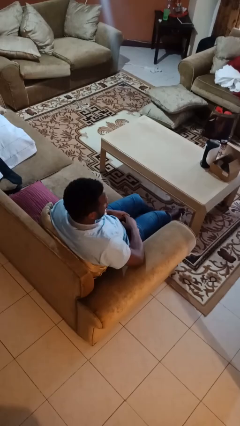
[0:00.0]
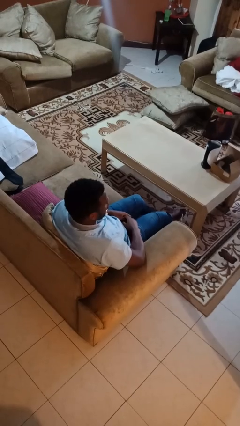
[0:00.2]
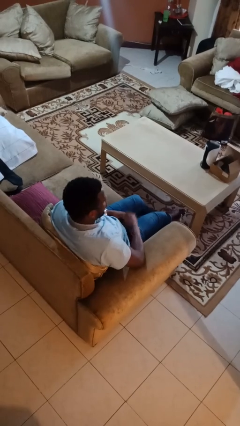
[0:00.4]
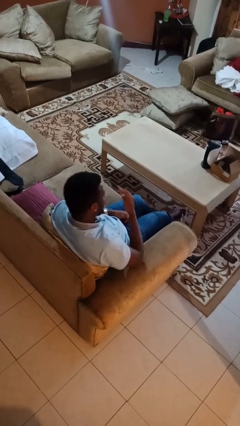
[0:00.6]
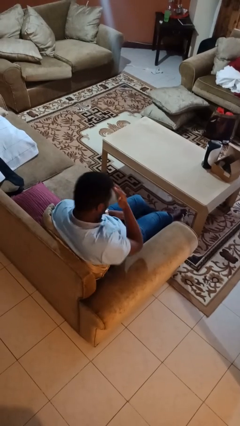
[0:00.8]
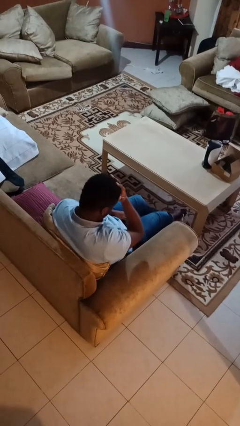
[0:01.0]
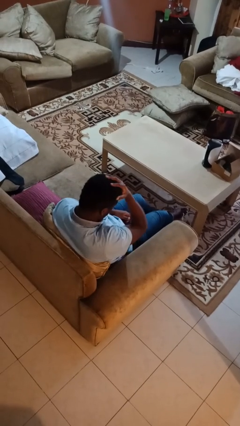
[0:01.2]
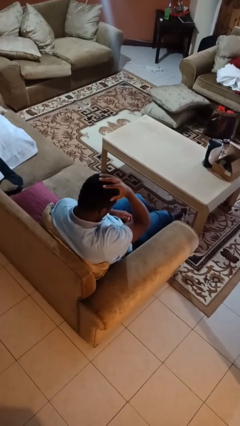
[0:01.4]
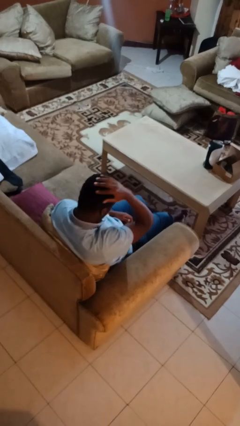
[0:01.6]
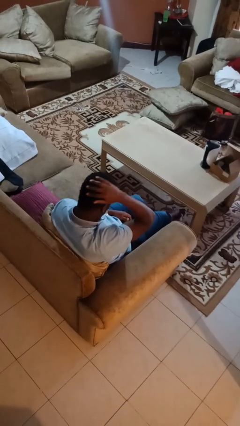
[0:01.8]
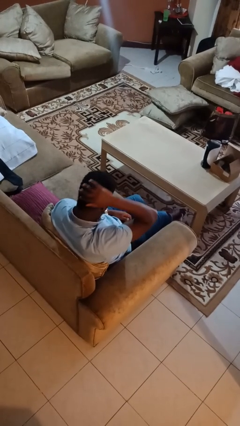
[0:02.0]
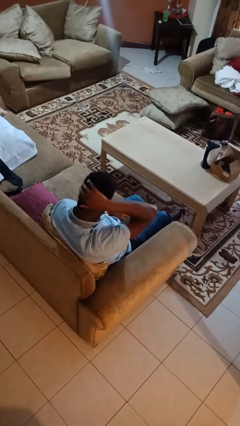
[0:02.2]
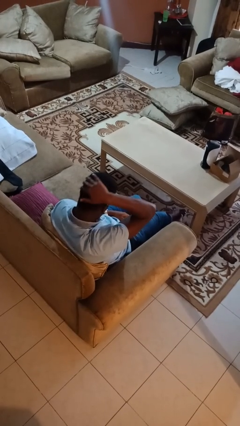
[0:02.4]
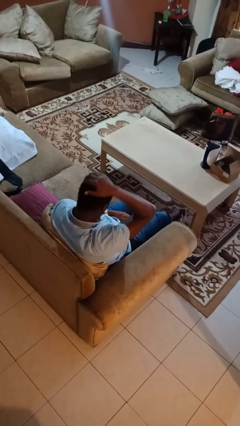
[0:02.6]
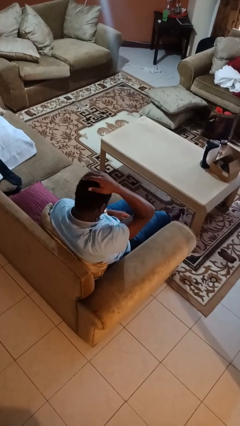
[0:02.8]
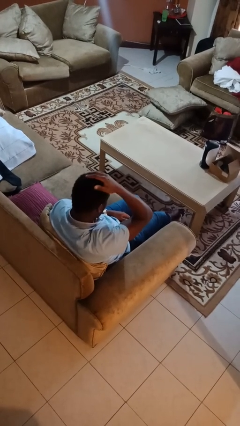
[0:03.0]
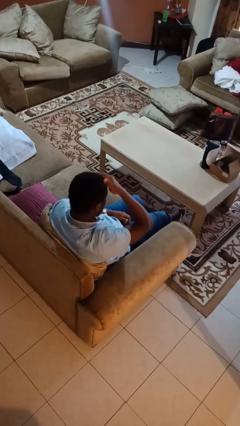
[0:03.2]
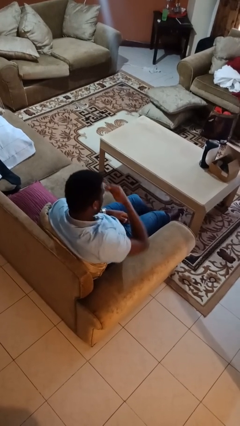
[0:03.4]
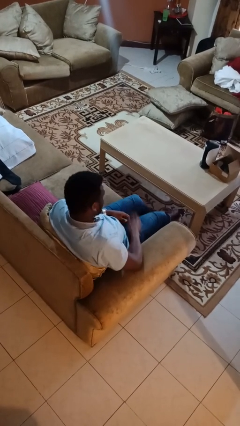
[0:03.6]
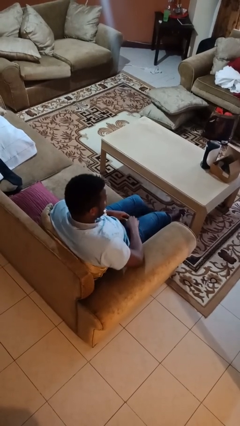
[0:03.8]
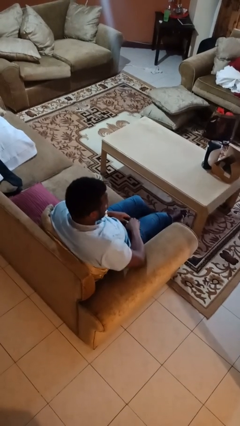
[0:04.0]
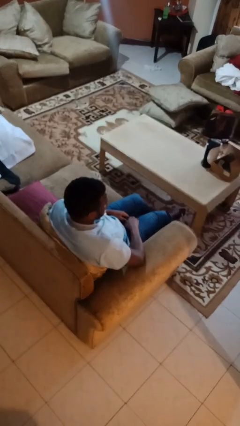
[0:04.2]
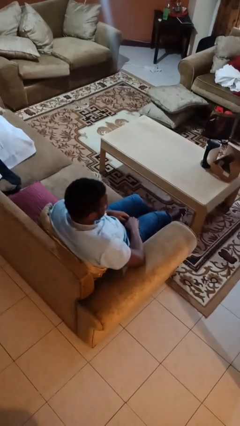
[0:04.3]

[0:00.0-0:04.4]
person strokes hair

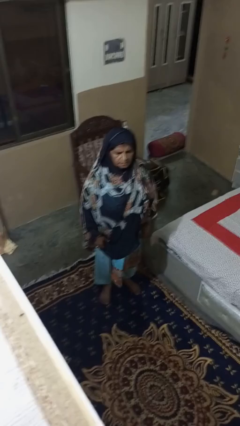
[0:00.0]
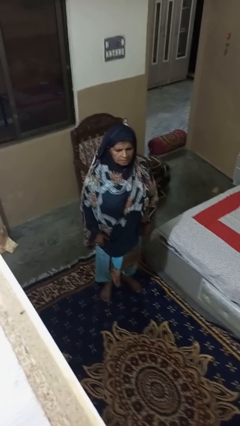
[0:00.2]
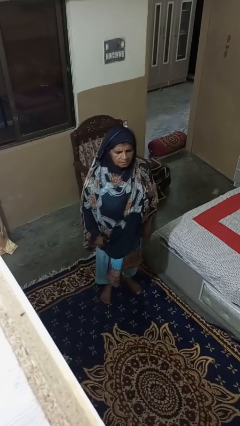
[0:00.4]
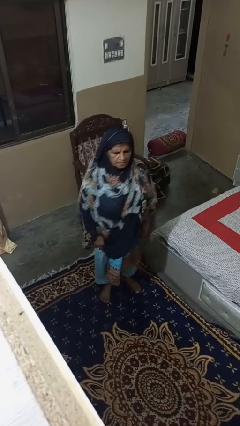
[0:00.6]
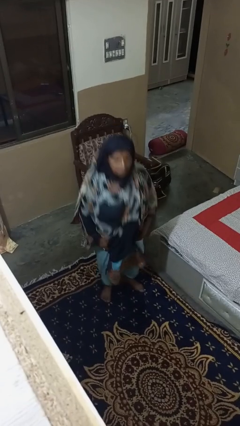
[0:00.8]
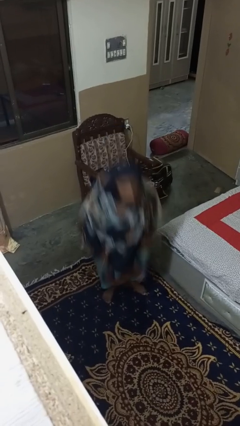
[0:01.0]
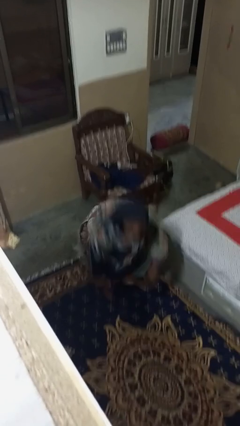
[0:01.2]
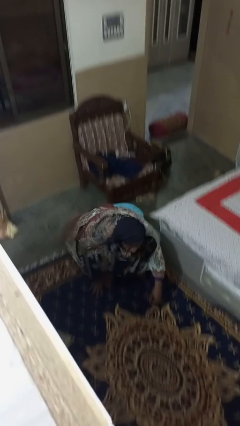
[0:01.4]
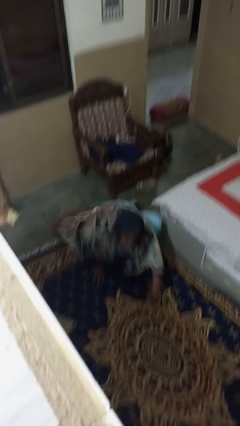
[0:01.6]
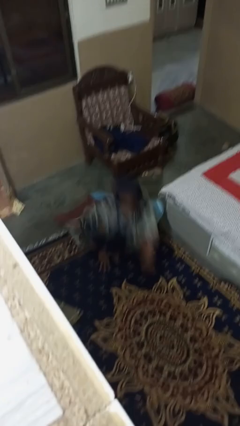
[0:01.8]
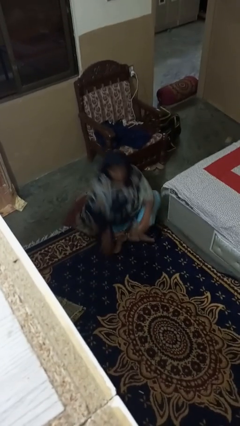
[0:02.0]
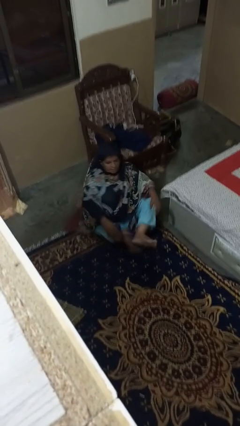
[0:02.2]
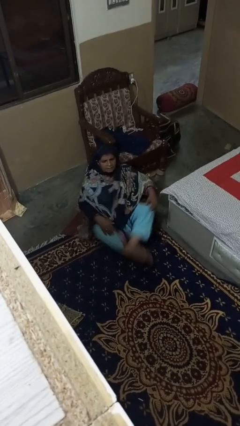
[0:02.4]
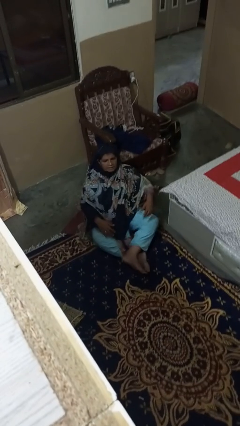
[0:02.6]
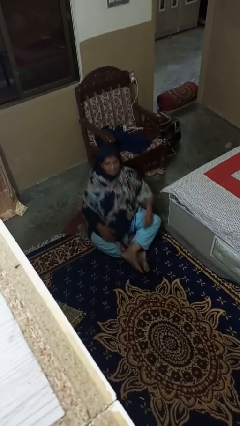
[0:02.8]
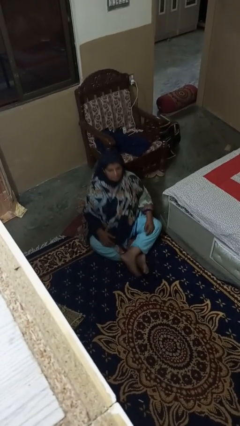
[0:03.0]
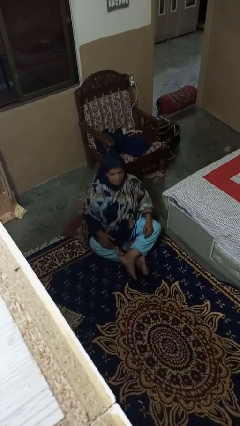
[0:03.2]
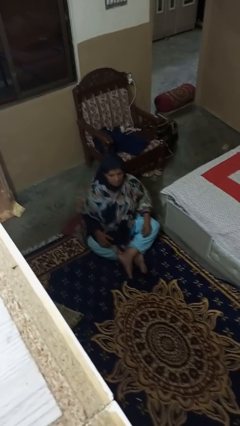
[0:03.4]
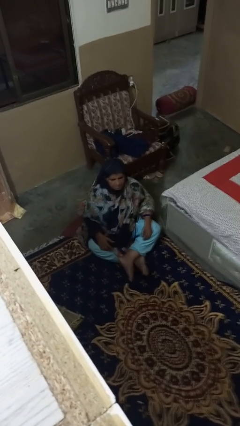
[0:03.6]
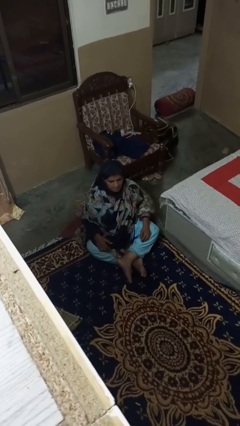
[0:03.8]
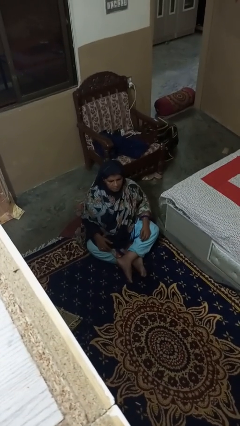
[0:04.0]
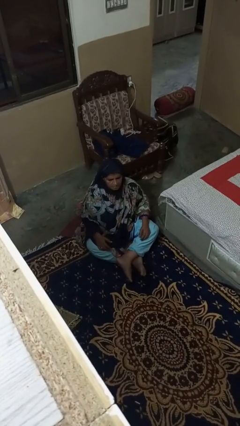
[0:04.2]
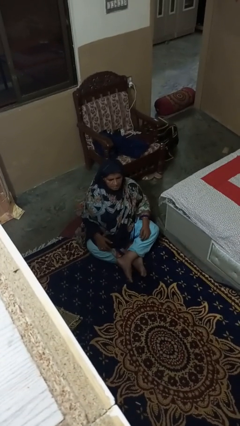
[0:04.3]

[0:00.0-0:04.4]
person sits crisscross

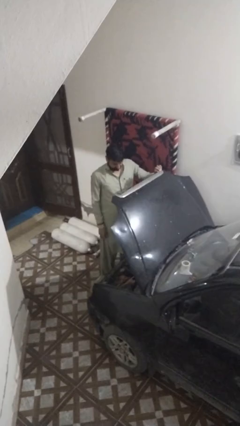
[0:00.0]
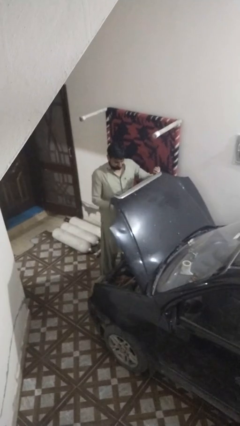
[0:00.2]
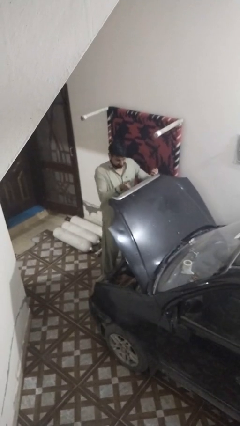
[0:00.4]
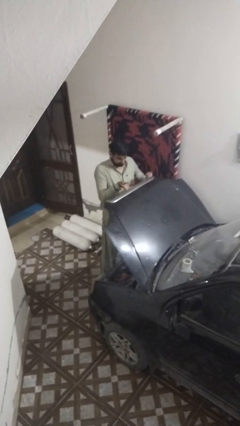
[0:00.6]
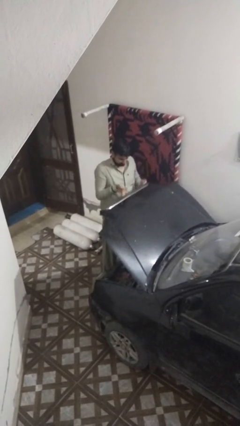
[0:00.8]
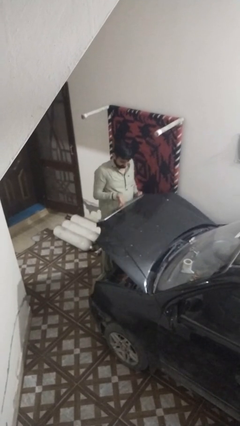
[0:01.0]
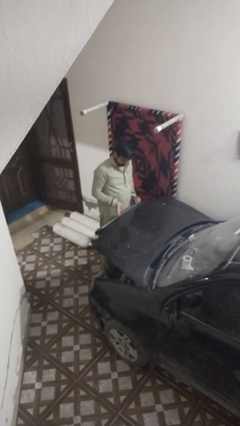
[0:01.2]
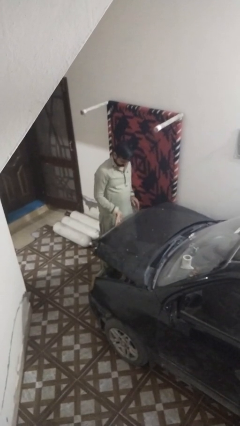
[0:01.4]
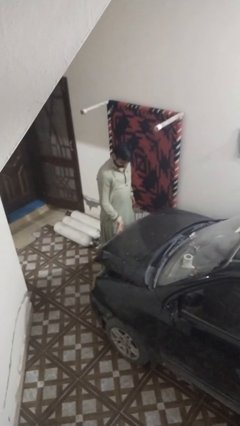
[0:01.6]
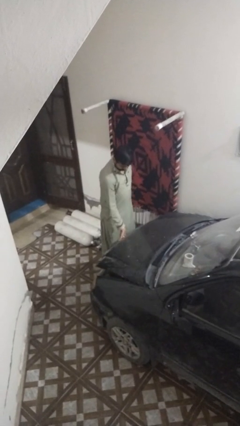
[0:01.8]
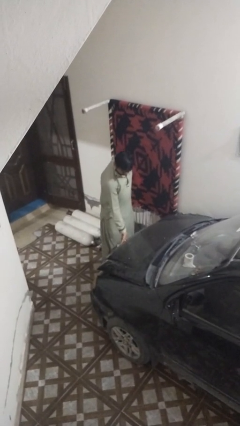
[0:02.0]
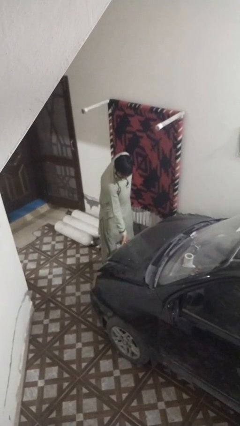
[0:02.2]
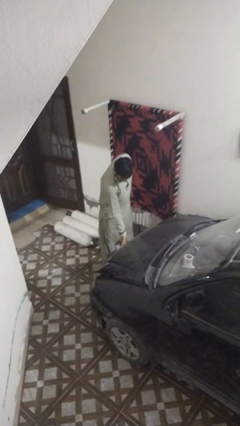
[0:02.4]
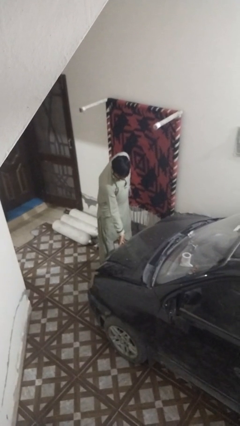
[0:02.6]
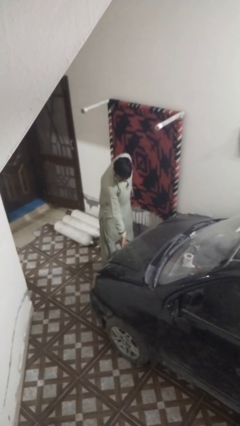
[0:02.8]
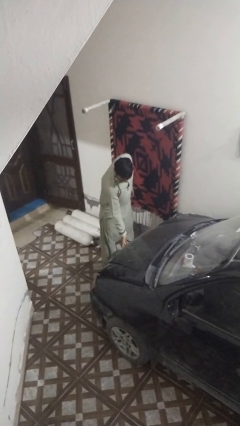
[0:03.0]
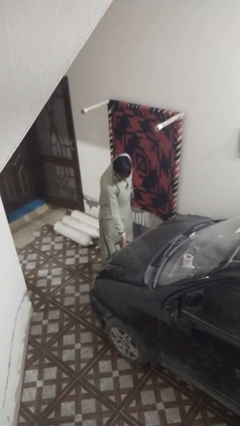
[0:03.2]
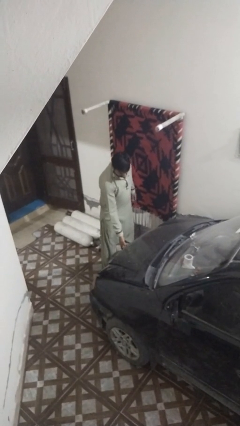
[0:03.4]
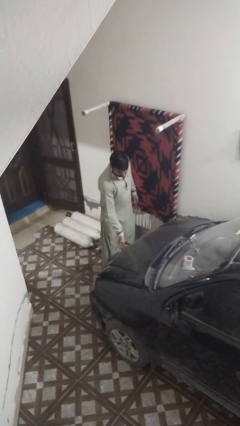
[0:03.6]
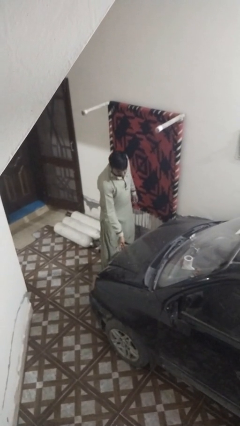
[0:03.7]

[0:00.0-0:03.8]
person closes car hood

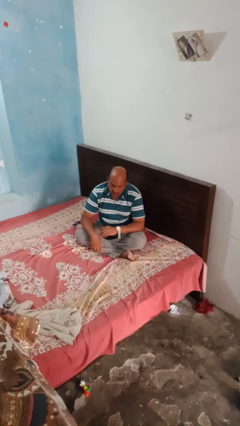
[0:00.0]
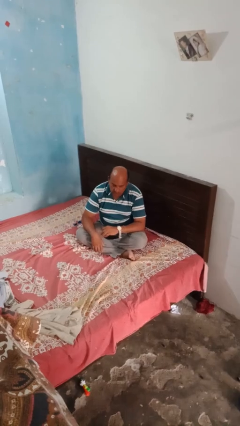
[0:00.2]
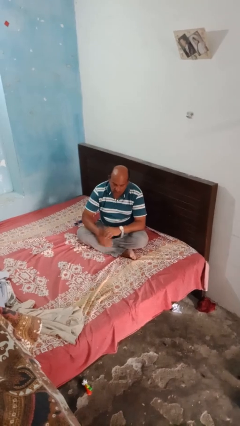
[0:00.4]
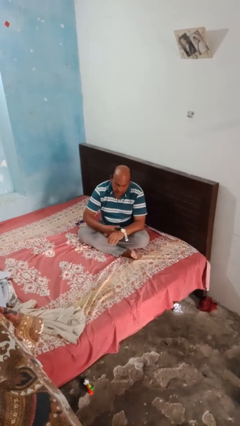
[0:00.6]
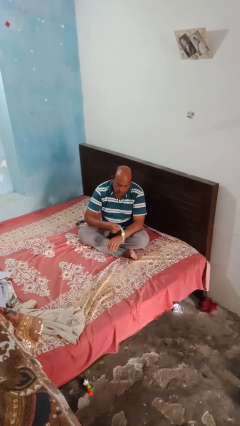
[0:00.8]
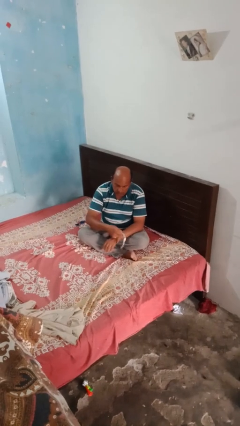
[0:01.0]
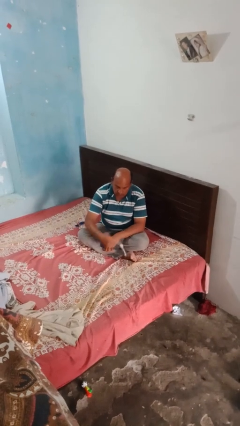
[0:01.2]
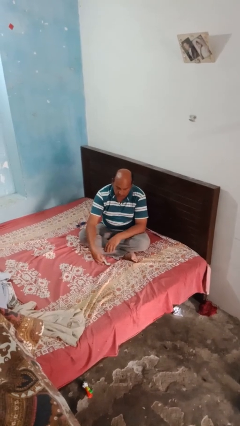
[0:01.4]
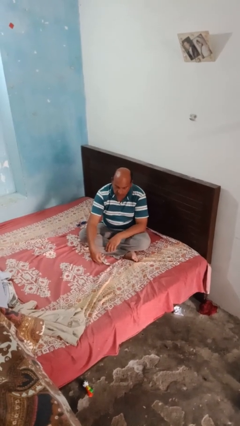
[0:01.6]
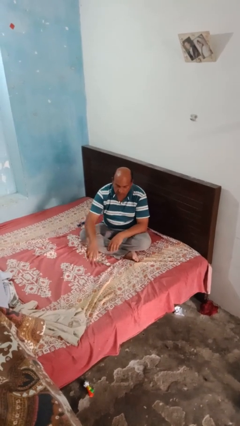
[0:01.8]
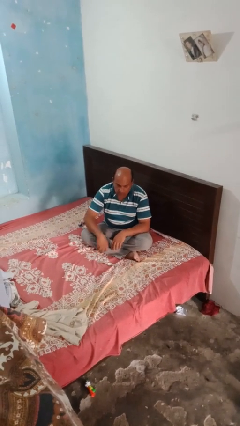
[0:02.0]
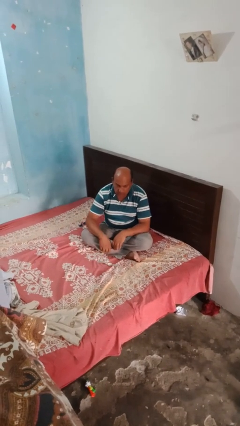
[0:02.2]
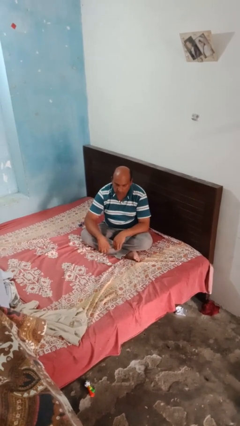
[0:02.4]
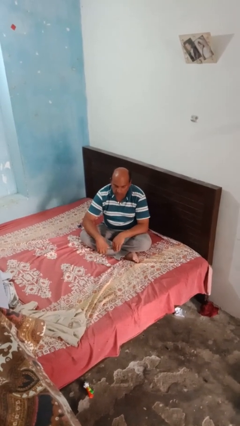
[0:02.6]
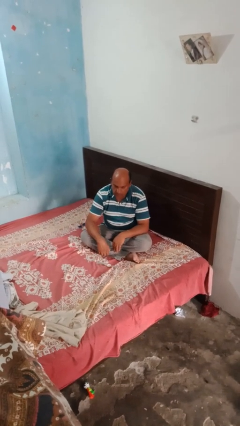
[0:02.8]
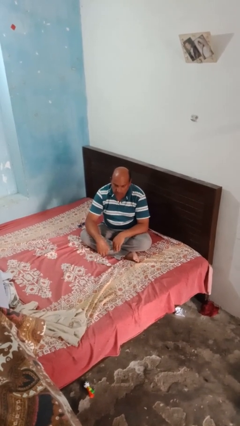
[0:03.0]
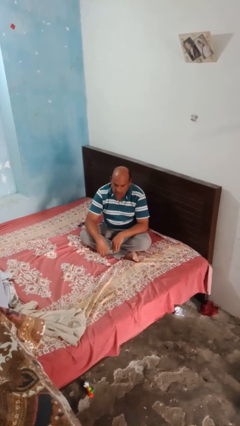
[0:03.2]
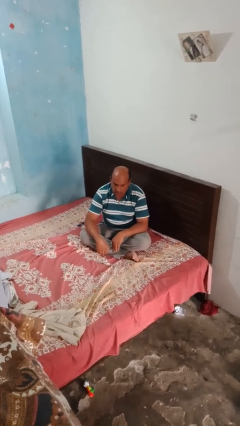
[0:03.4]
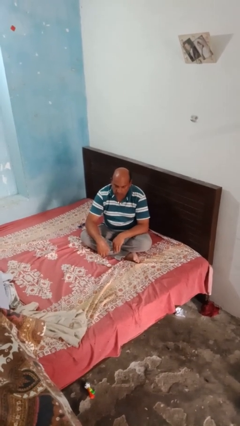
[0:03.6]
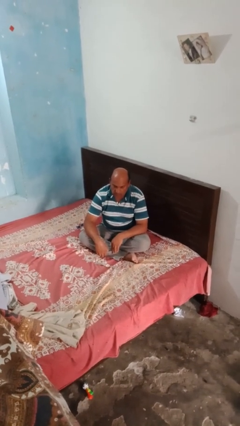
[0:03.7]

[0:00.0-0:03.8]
person takes off wristwatch

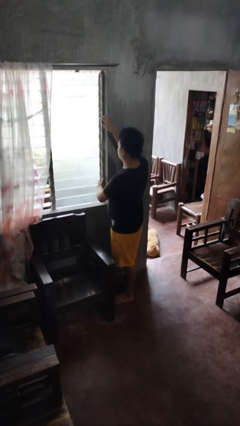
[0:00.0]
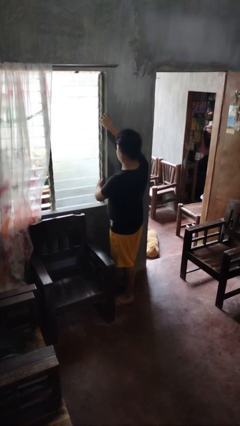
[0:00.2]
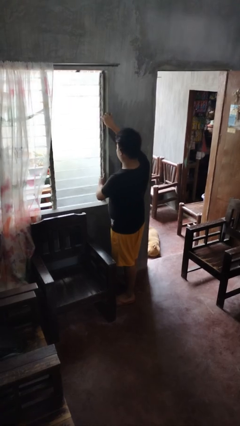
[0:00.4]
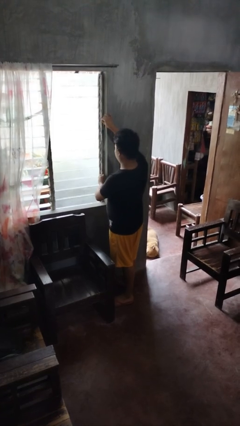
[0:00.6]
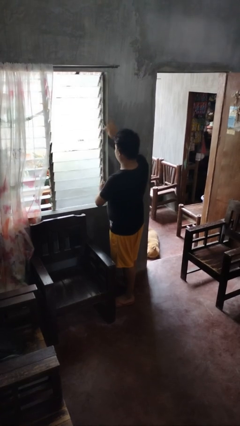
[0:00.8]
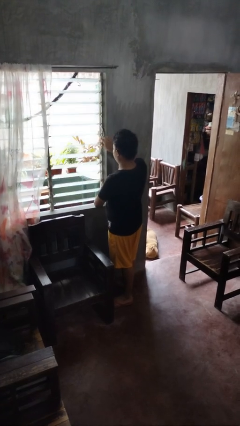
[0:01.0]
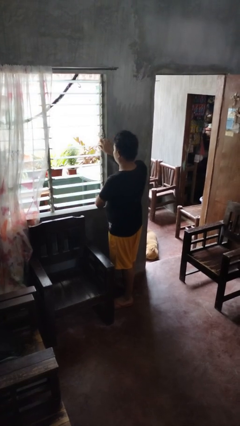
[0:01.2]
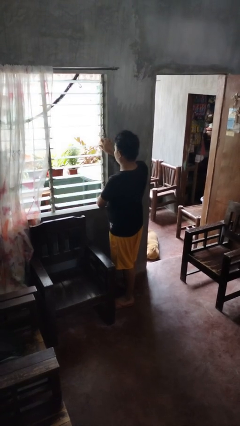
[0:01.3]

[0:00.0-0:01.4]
person opens home window
